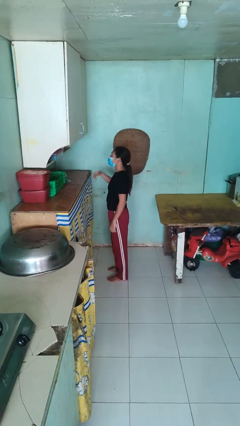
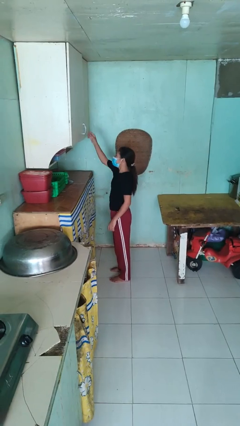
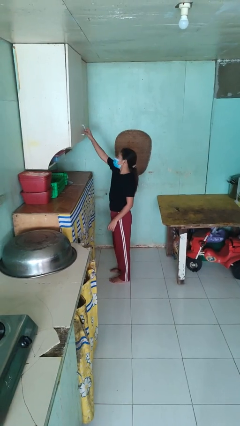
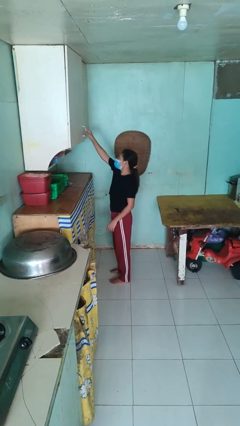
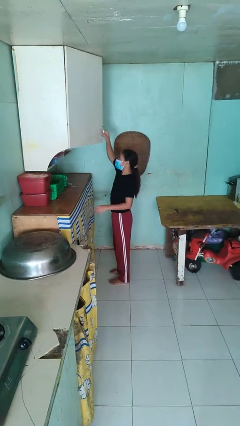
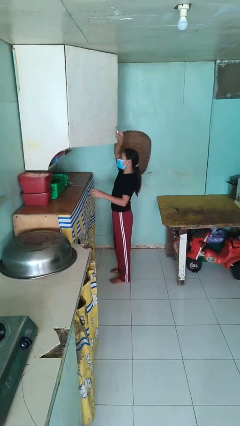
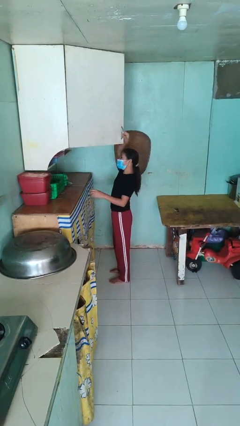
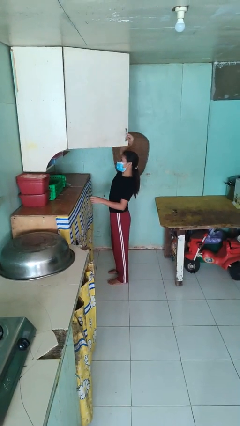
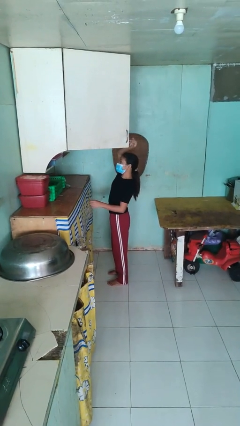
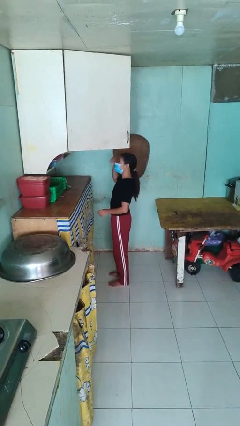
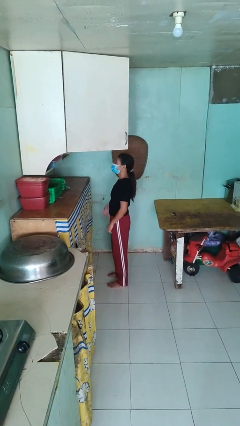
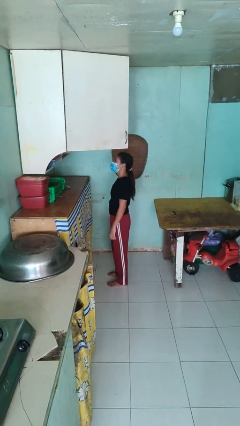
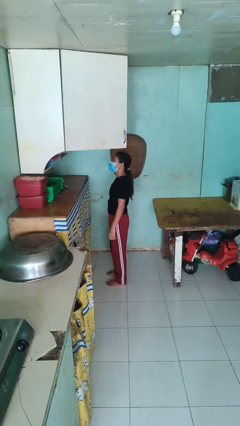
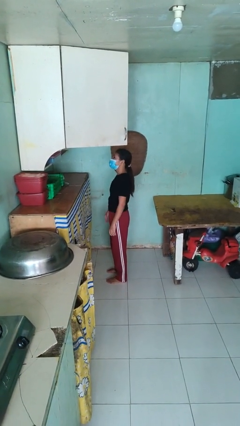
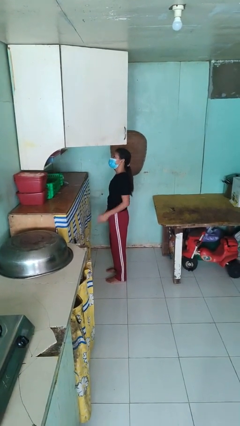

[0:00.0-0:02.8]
person opens cabinet

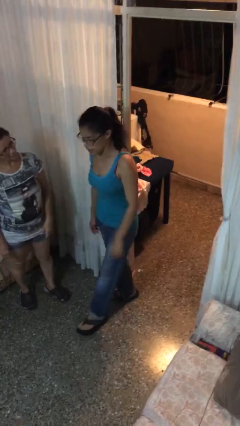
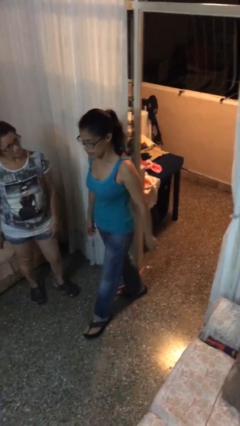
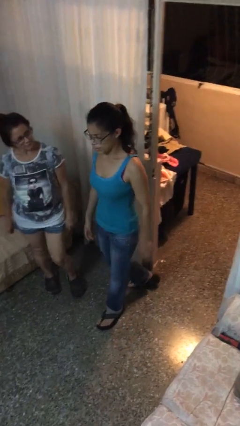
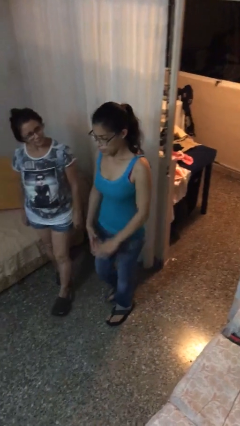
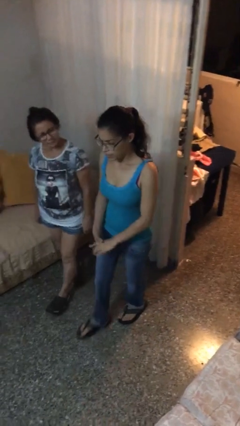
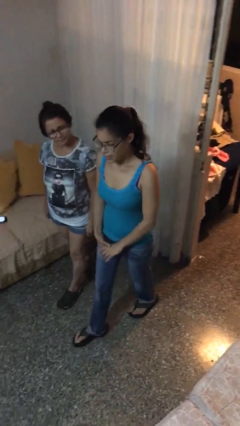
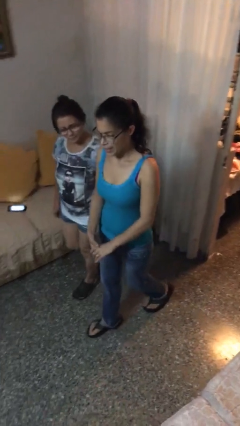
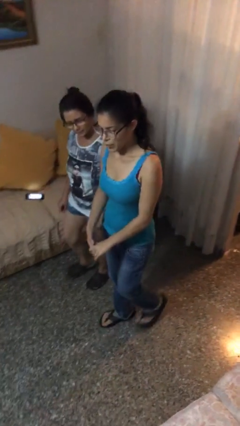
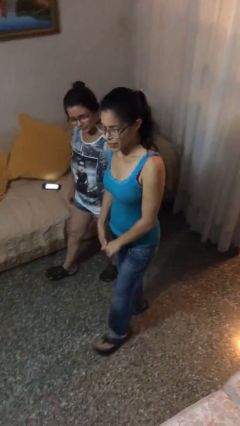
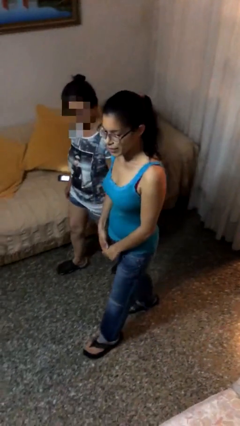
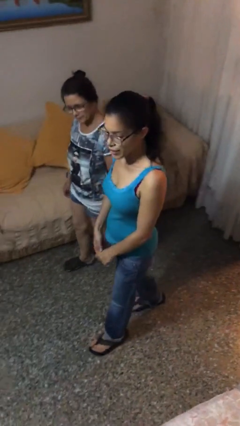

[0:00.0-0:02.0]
person talks to person

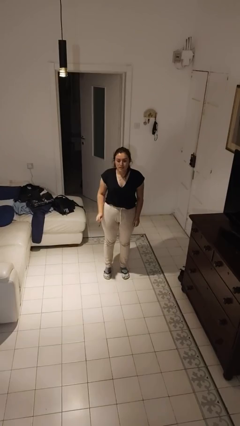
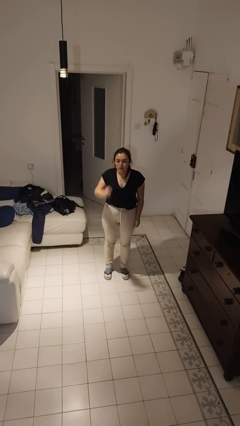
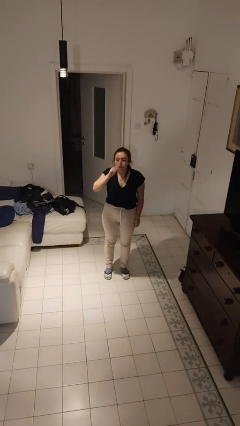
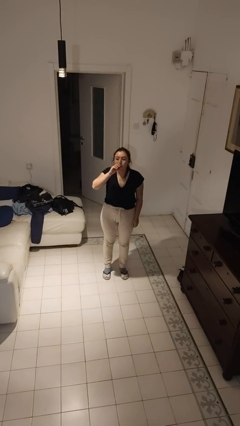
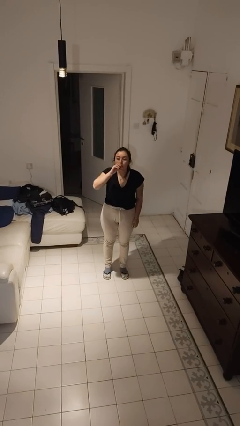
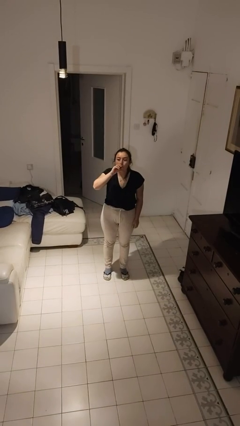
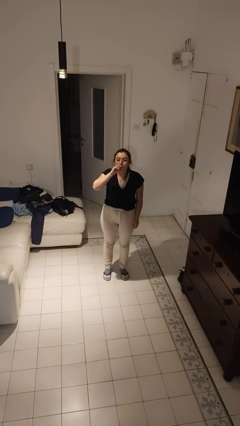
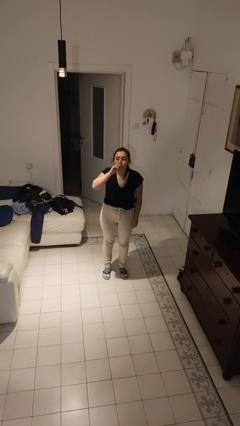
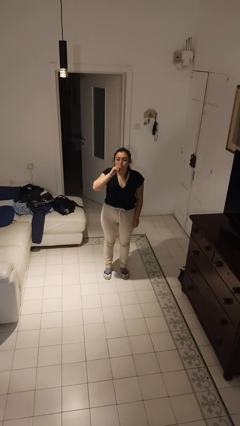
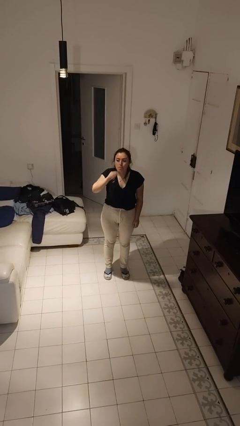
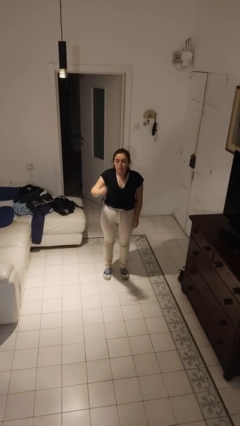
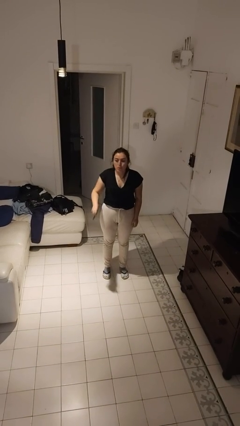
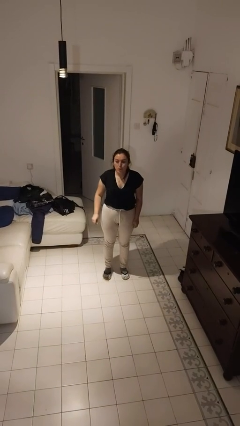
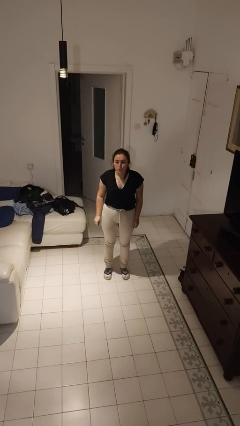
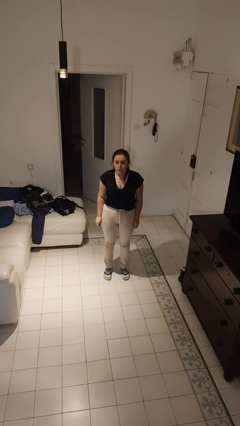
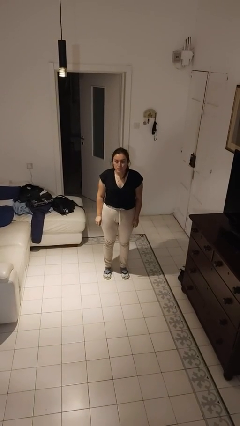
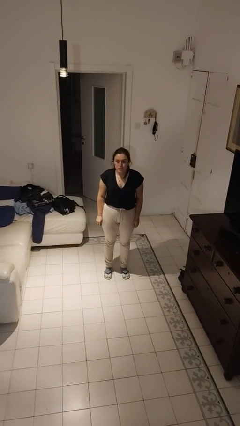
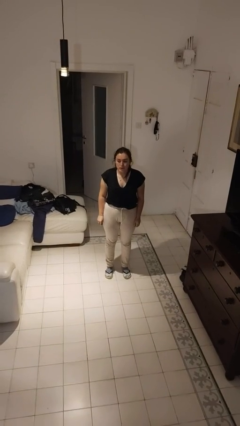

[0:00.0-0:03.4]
person vapes

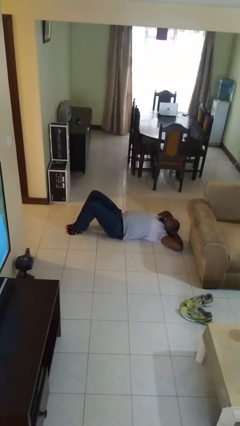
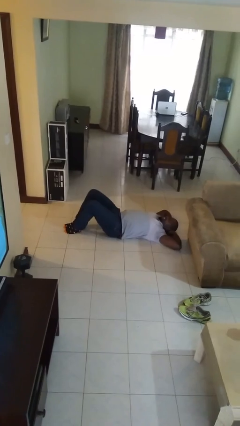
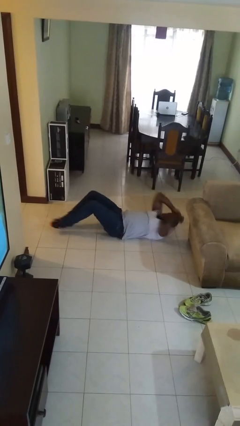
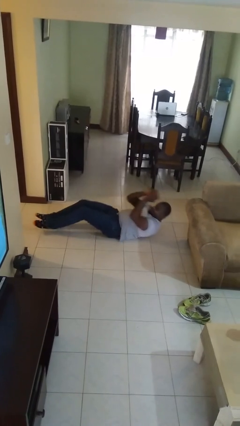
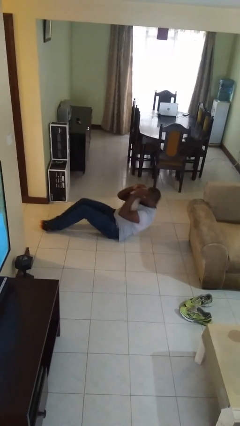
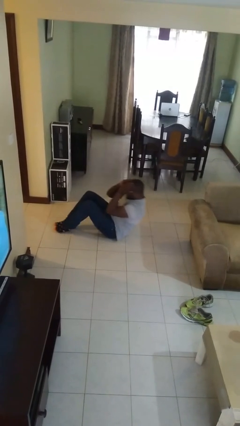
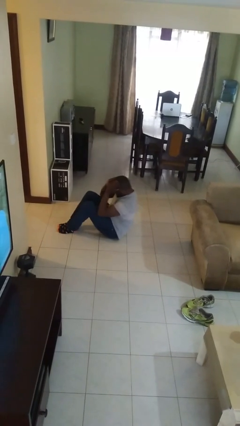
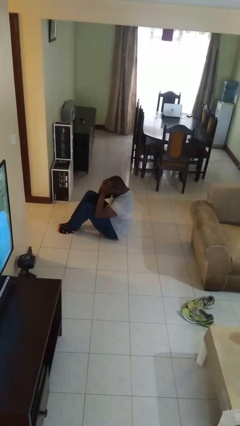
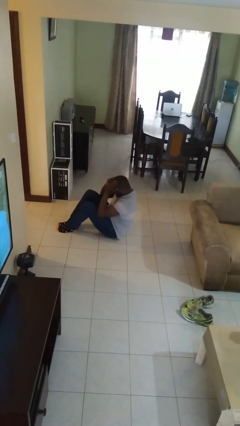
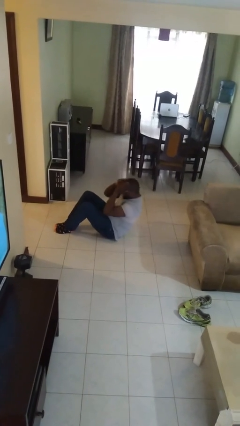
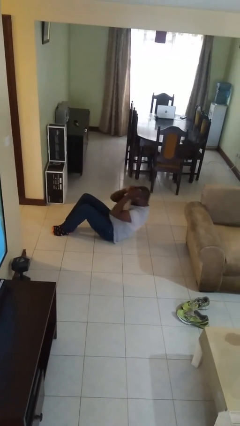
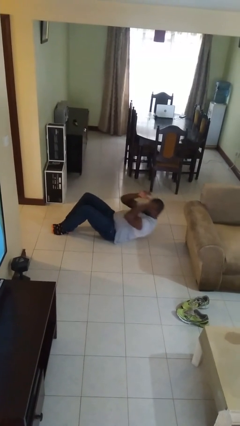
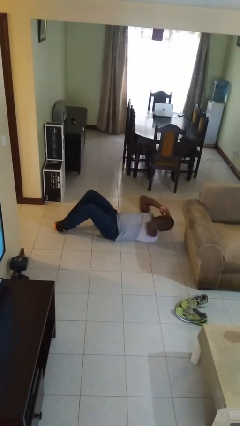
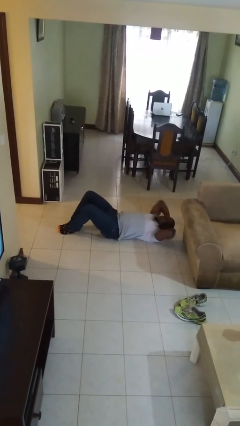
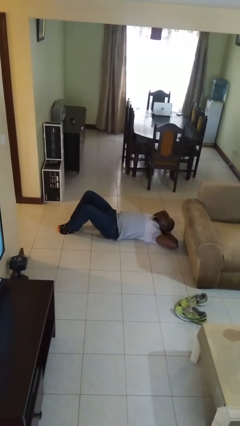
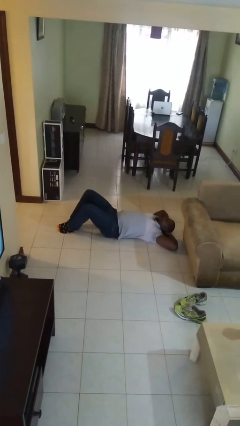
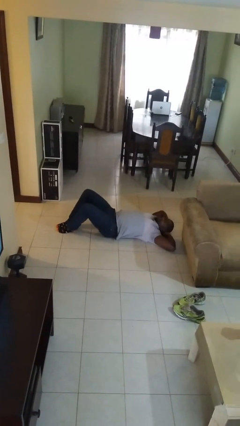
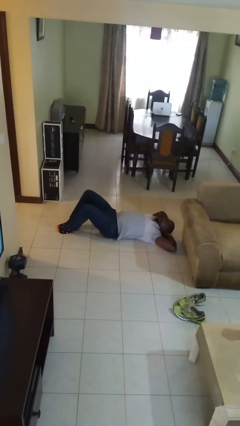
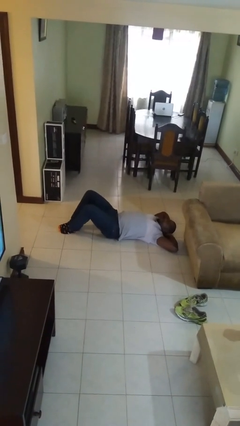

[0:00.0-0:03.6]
person exercises with situp

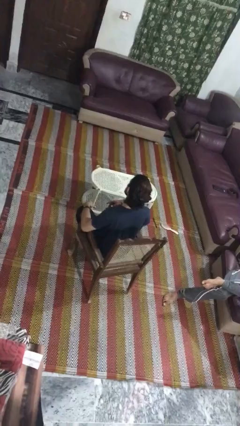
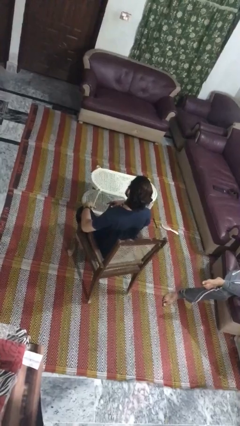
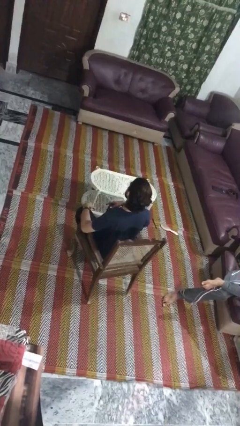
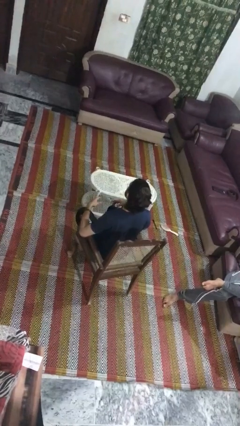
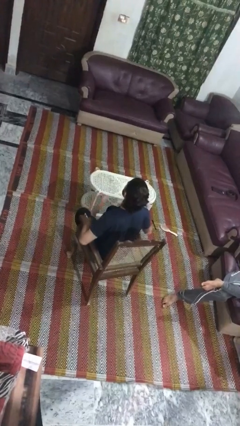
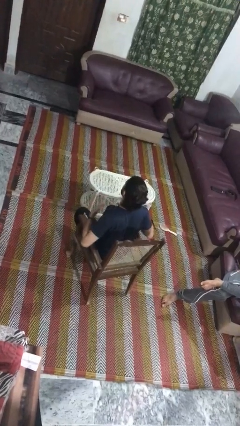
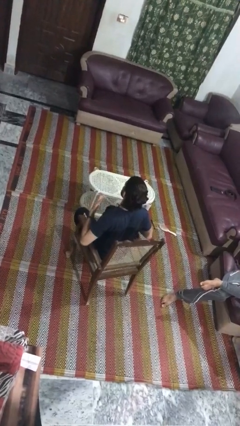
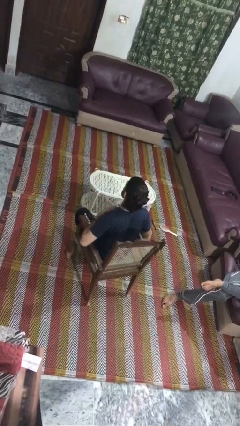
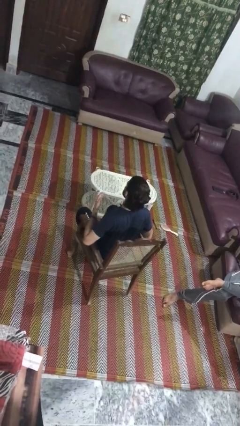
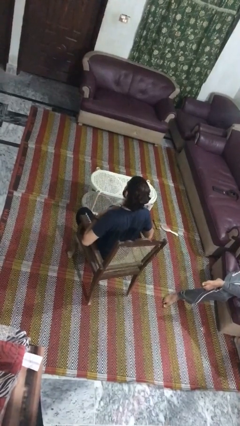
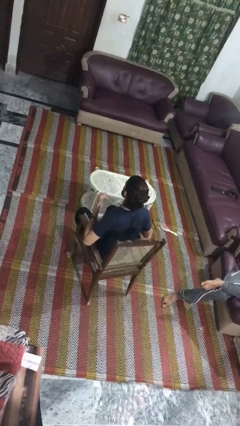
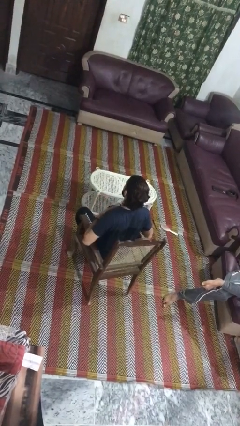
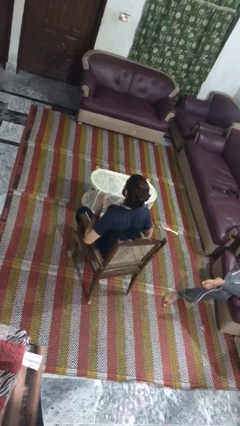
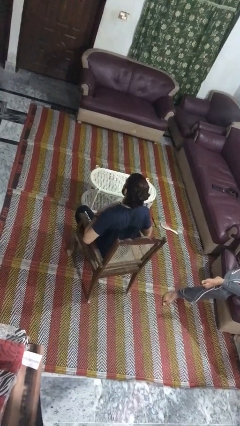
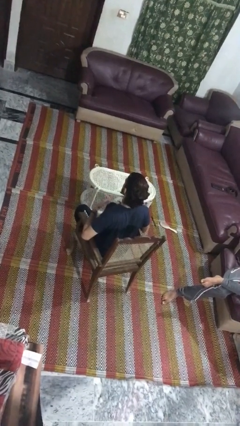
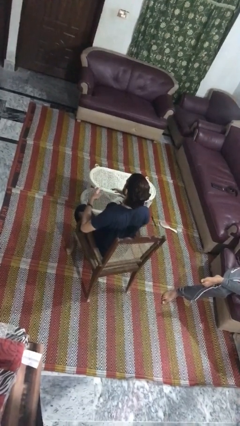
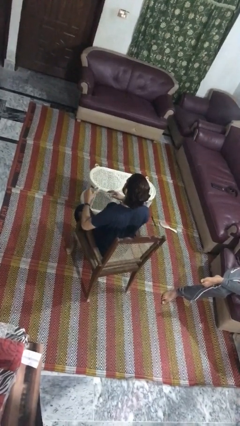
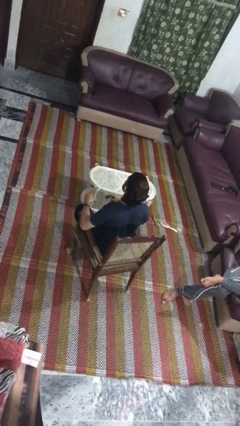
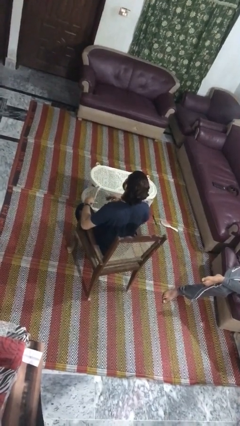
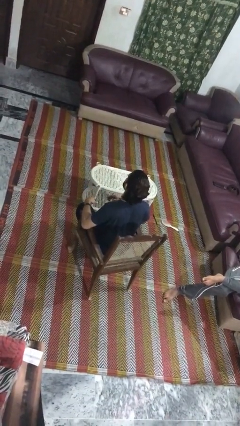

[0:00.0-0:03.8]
person drums on chest

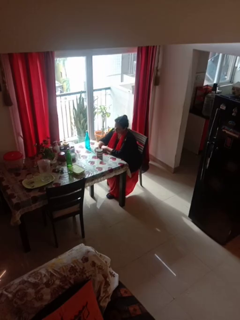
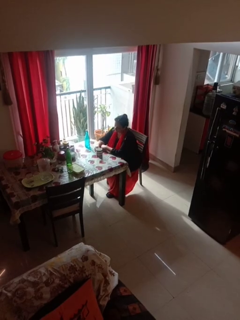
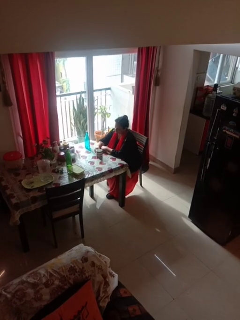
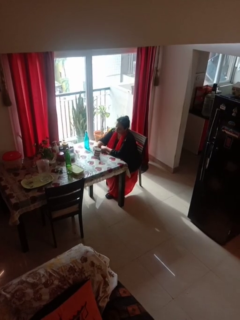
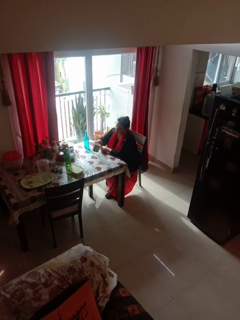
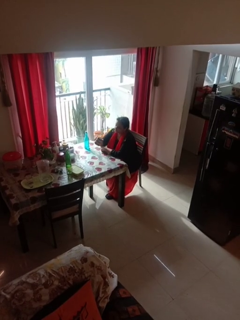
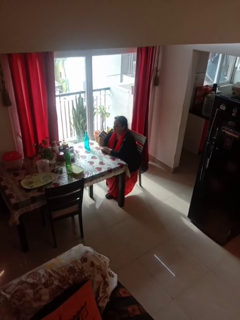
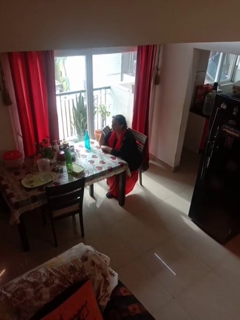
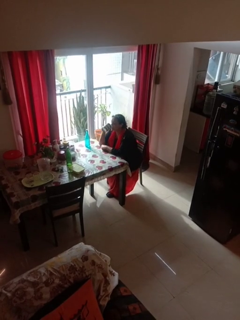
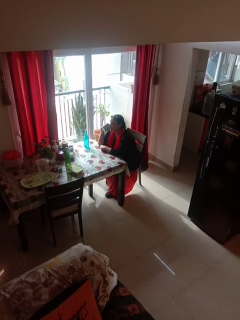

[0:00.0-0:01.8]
person picks up object from table

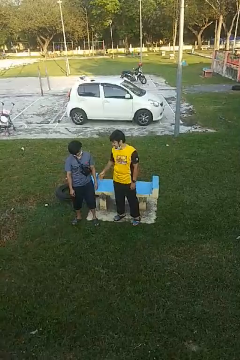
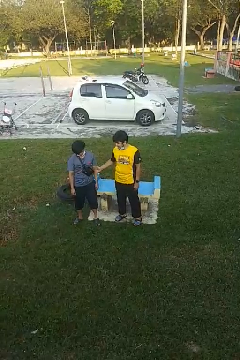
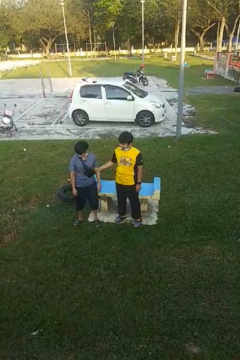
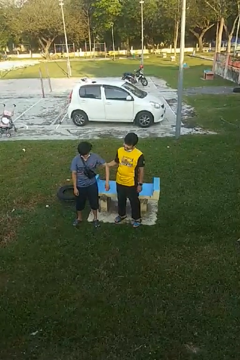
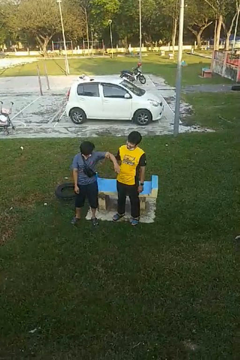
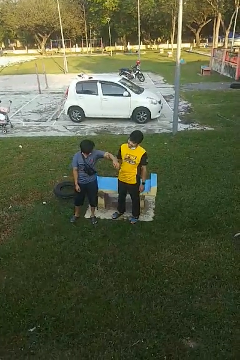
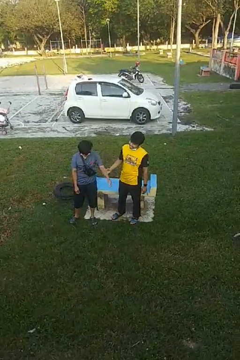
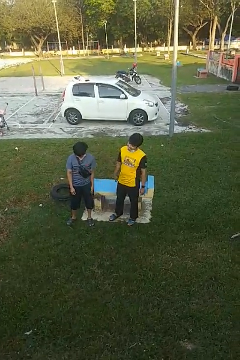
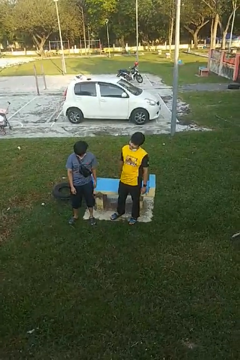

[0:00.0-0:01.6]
person grabs person by bicep
